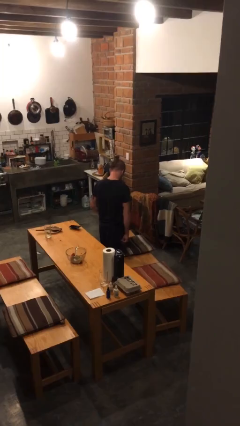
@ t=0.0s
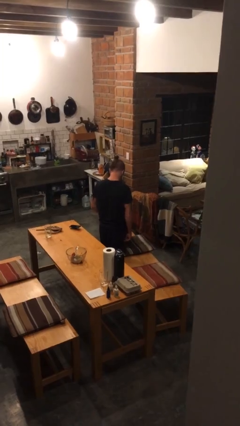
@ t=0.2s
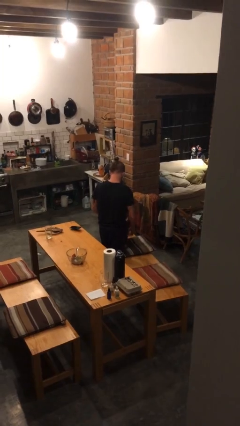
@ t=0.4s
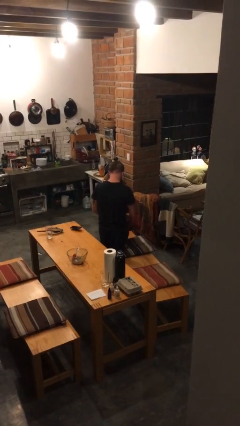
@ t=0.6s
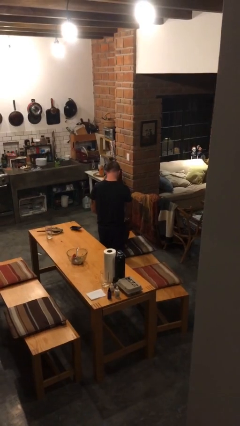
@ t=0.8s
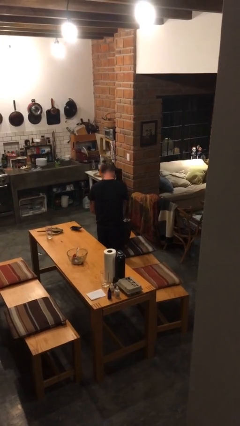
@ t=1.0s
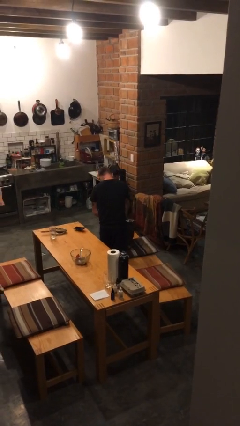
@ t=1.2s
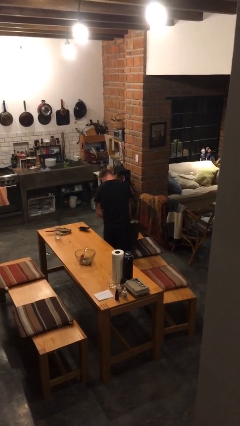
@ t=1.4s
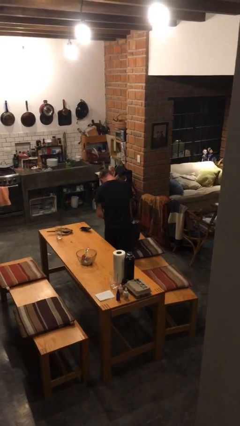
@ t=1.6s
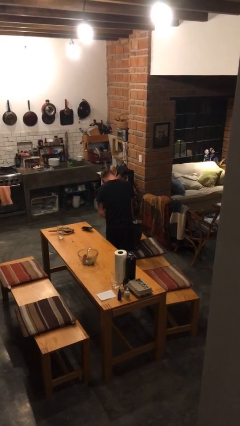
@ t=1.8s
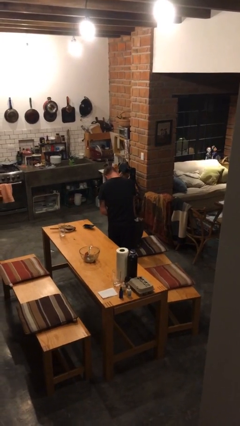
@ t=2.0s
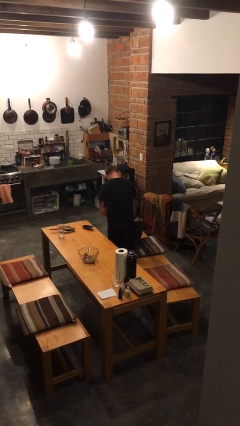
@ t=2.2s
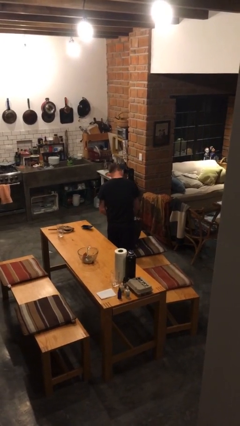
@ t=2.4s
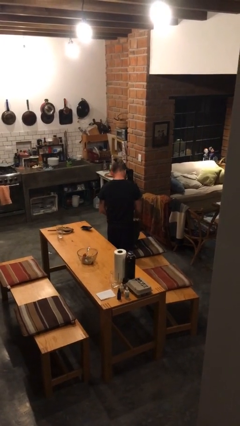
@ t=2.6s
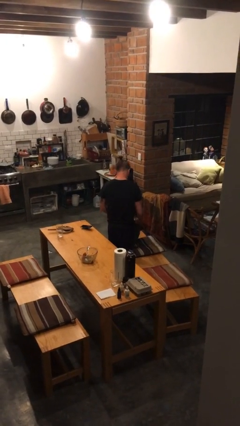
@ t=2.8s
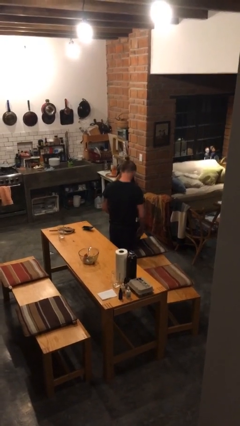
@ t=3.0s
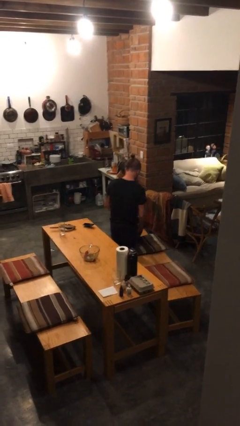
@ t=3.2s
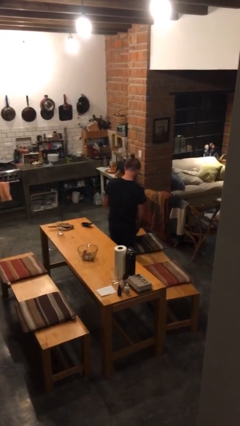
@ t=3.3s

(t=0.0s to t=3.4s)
person searches in bag

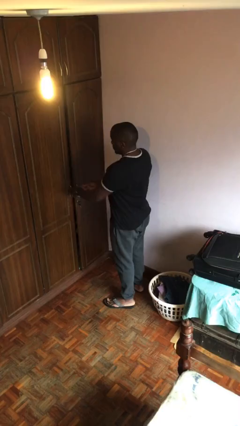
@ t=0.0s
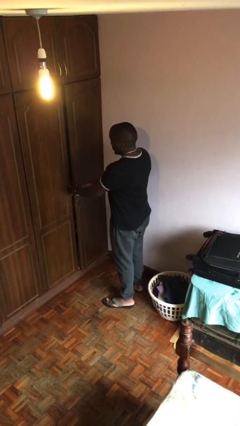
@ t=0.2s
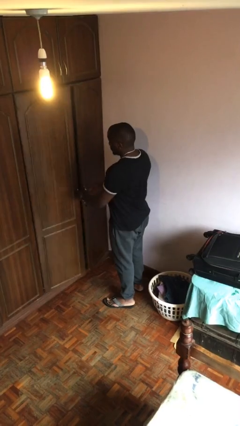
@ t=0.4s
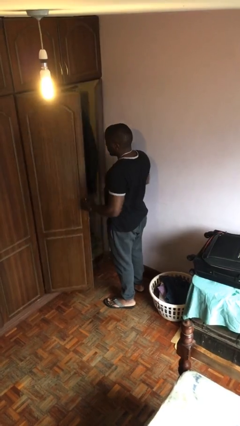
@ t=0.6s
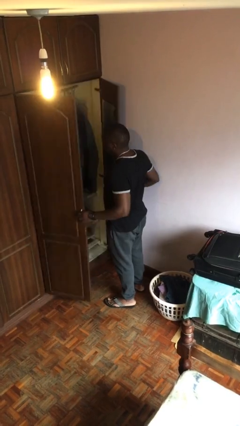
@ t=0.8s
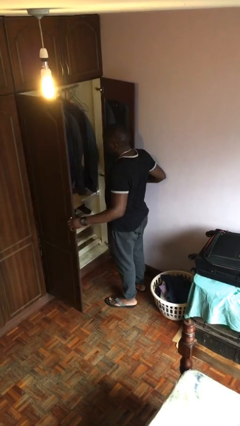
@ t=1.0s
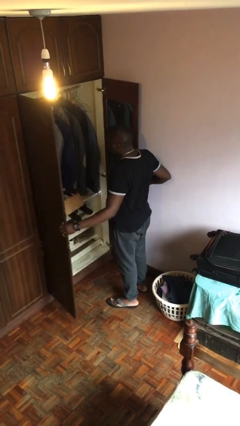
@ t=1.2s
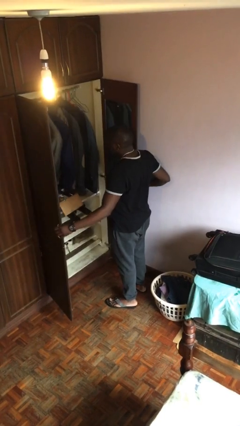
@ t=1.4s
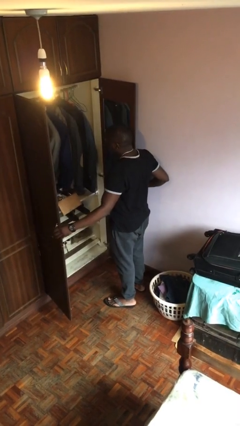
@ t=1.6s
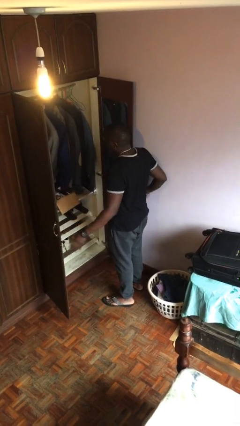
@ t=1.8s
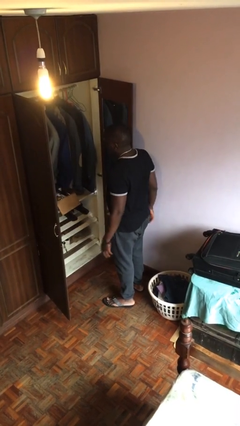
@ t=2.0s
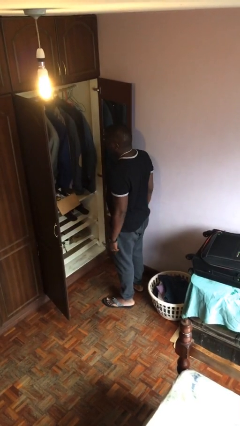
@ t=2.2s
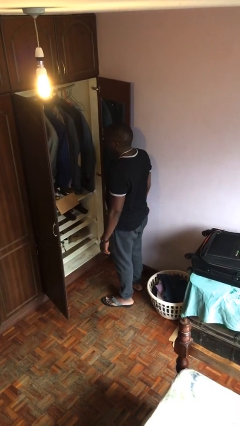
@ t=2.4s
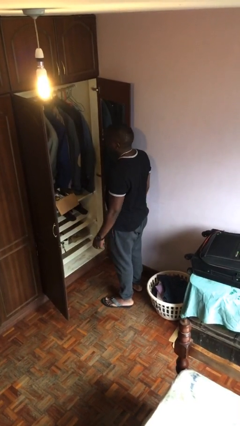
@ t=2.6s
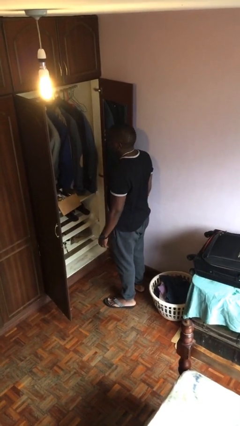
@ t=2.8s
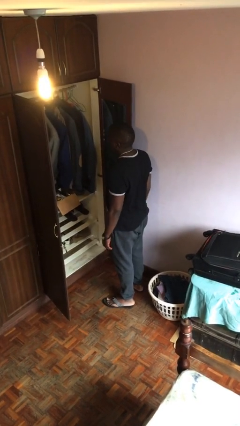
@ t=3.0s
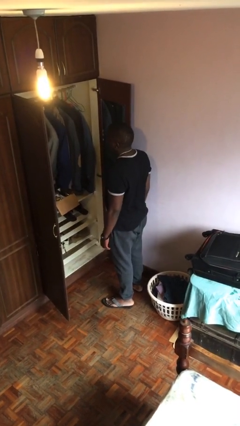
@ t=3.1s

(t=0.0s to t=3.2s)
person opens closet door

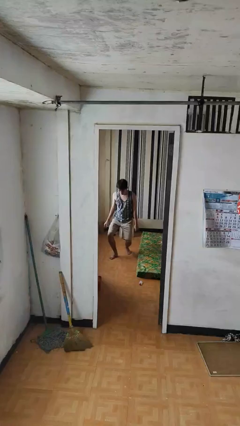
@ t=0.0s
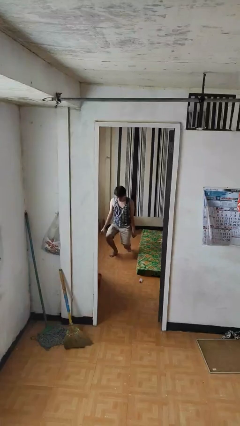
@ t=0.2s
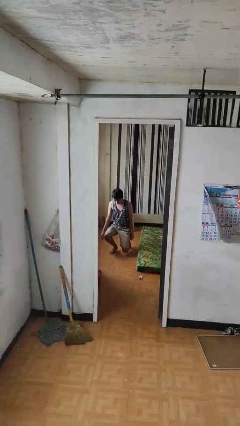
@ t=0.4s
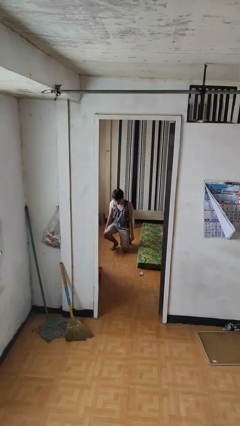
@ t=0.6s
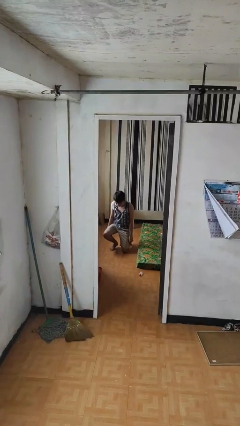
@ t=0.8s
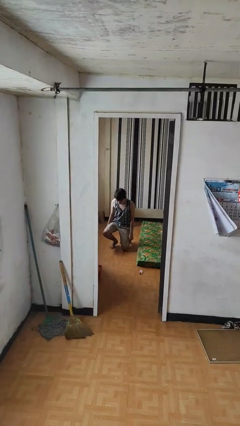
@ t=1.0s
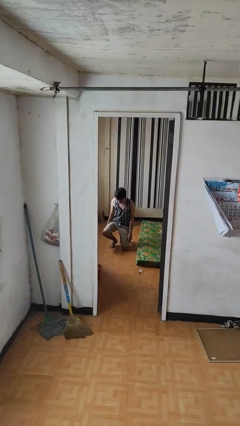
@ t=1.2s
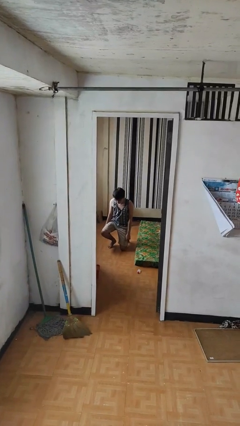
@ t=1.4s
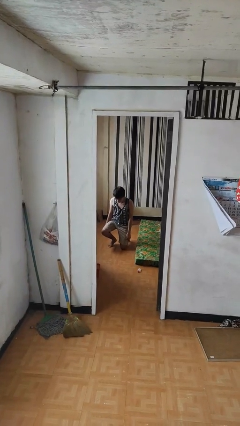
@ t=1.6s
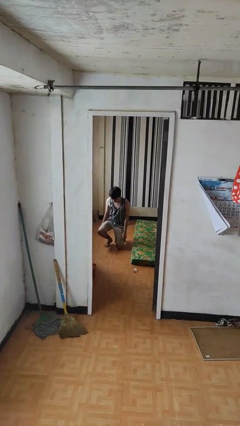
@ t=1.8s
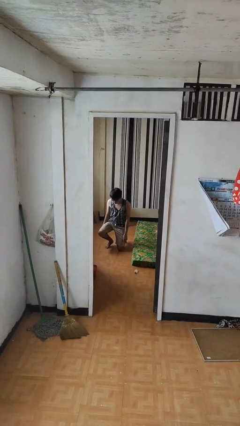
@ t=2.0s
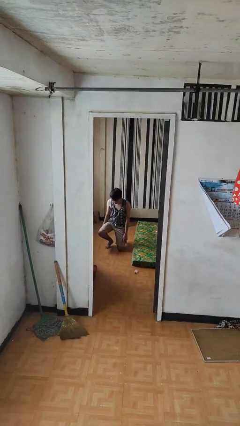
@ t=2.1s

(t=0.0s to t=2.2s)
person kneels

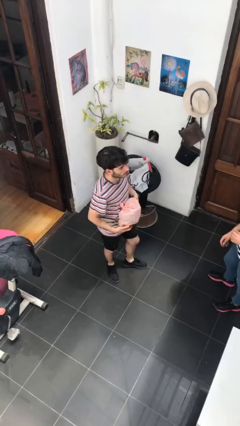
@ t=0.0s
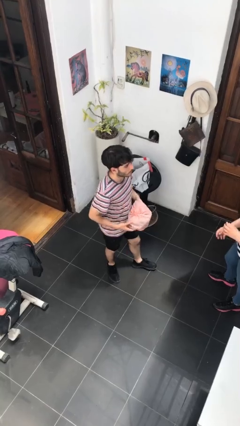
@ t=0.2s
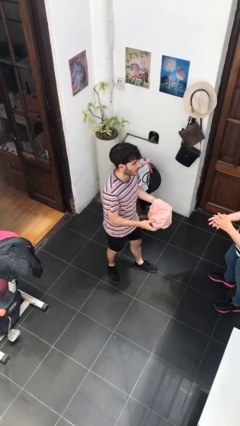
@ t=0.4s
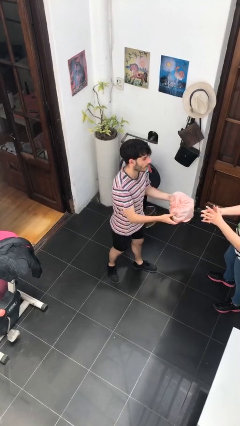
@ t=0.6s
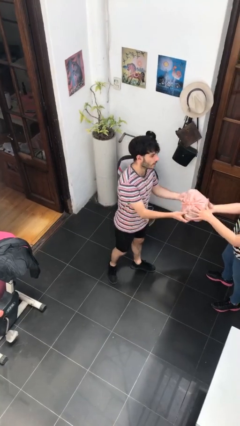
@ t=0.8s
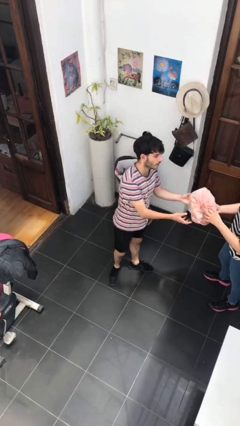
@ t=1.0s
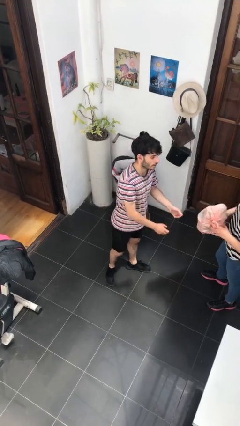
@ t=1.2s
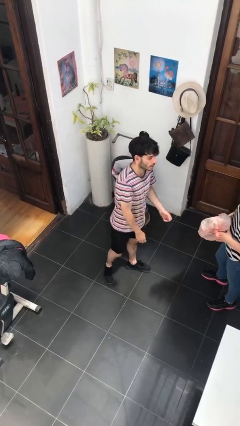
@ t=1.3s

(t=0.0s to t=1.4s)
person transfers object to person

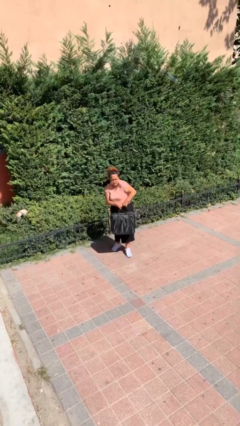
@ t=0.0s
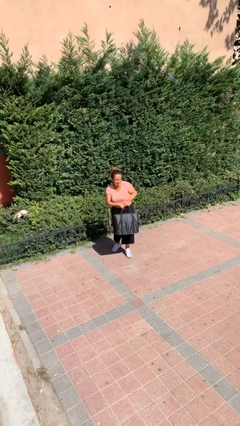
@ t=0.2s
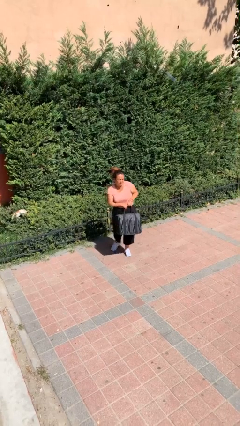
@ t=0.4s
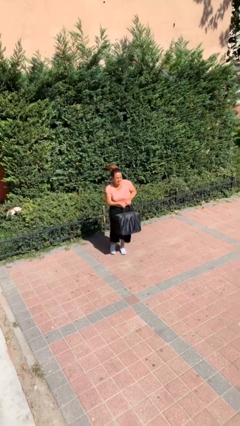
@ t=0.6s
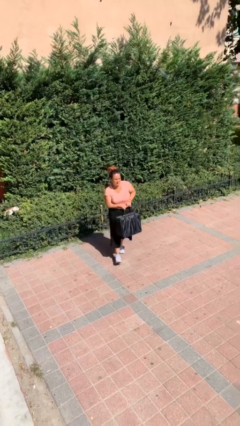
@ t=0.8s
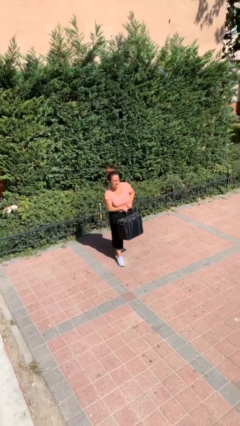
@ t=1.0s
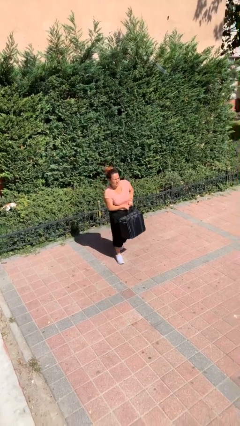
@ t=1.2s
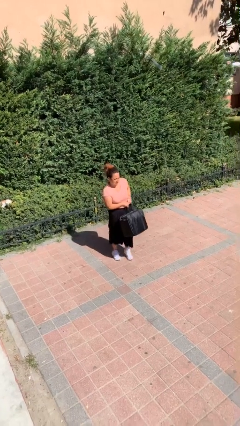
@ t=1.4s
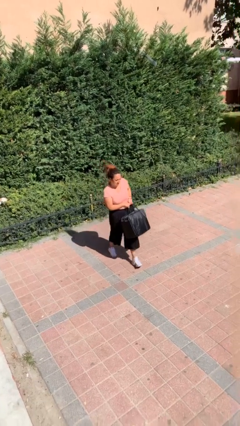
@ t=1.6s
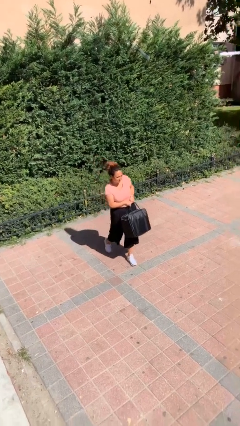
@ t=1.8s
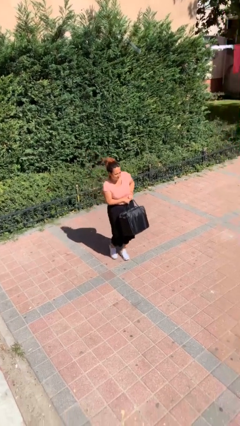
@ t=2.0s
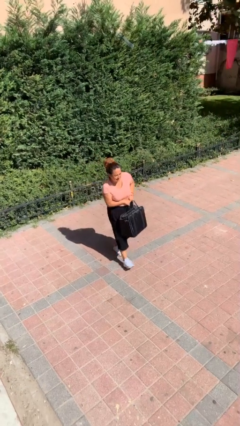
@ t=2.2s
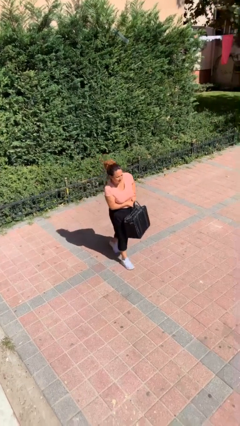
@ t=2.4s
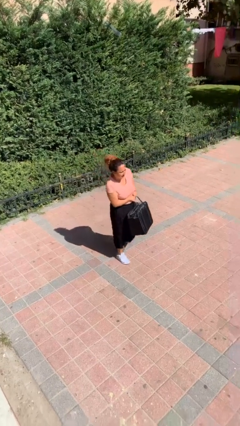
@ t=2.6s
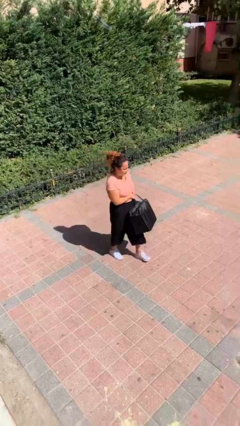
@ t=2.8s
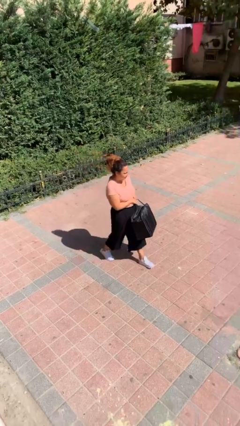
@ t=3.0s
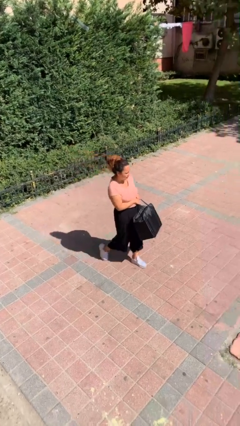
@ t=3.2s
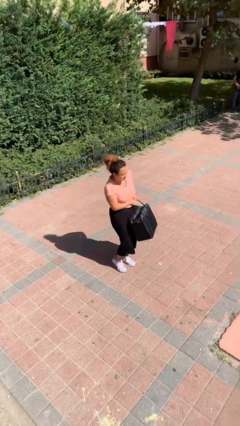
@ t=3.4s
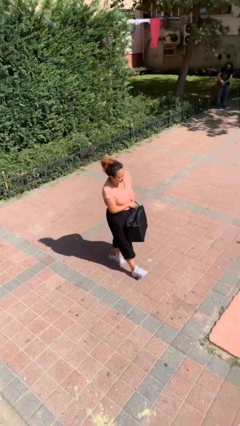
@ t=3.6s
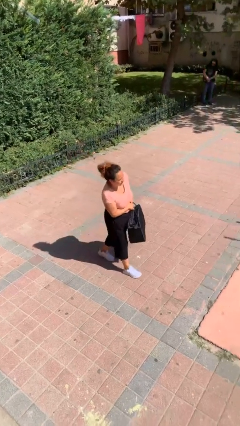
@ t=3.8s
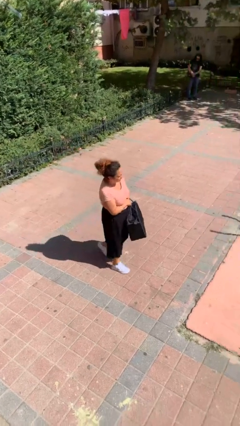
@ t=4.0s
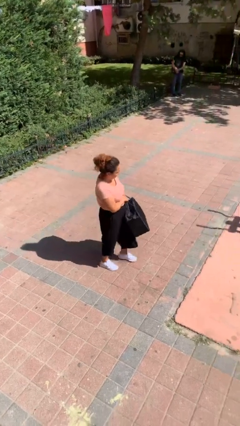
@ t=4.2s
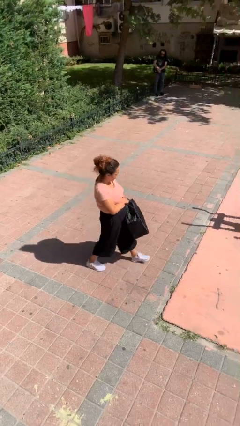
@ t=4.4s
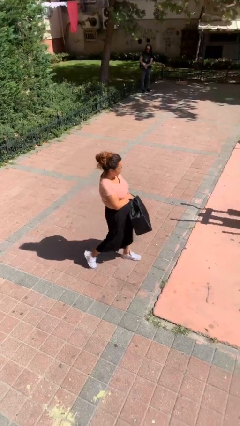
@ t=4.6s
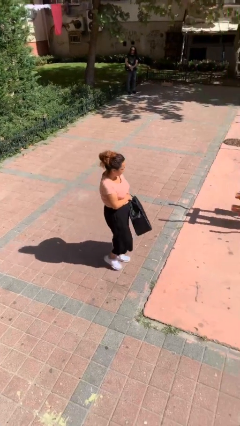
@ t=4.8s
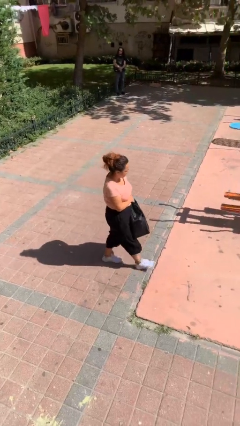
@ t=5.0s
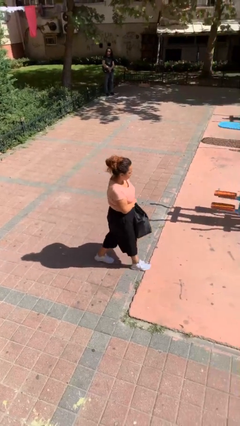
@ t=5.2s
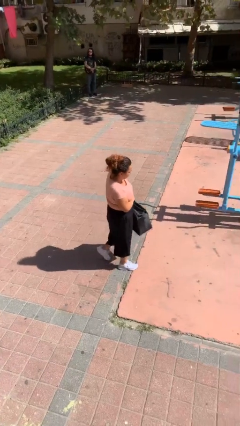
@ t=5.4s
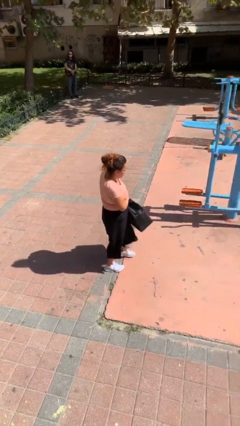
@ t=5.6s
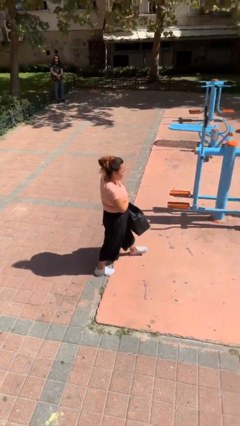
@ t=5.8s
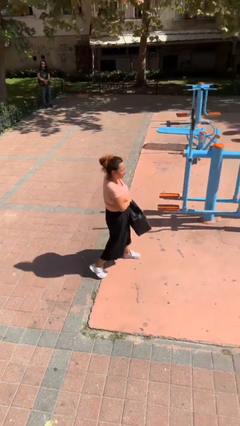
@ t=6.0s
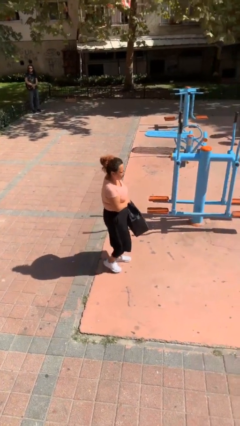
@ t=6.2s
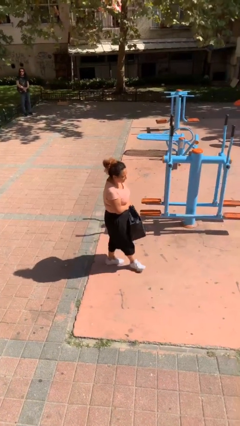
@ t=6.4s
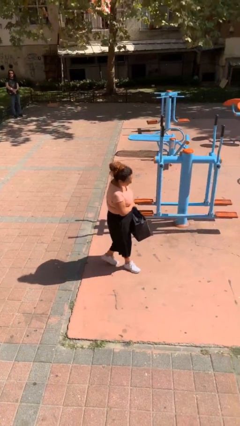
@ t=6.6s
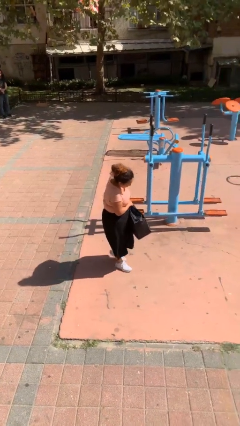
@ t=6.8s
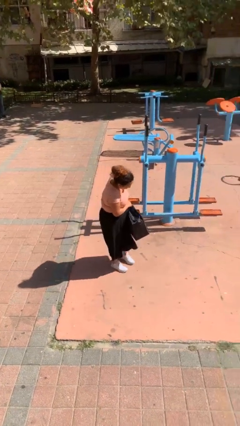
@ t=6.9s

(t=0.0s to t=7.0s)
person carries heavy object

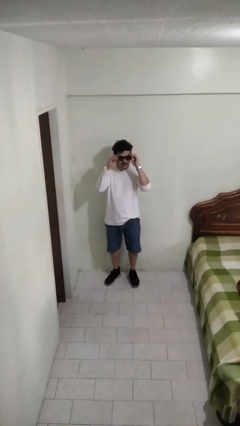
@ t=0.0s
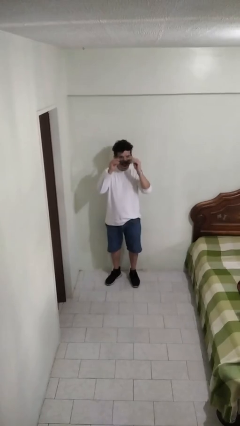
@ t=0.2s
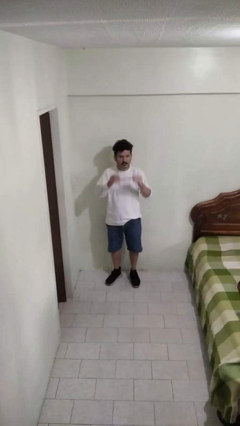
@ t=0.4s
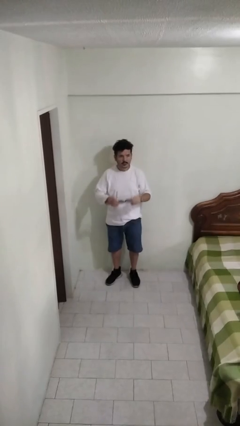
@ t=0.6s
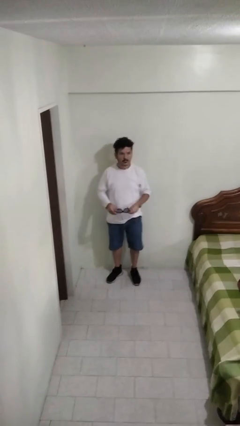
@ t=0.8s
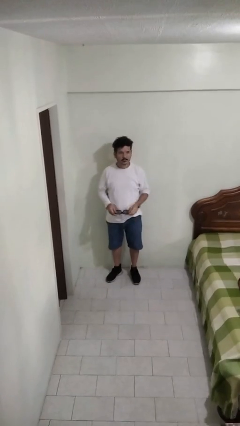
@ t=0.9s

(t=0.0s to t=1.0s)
person takes off sunglasses
